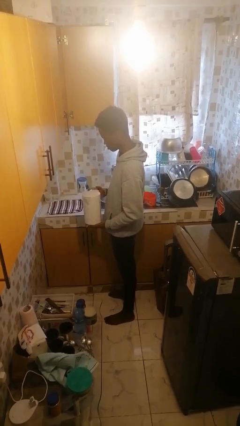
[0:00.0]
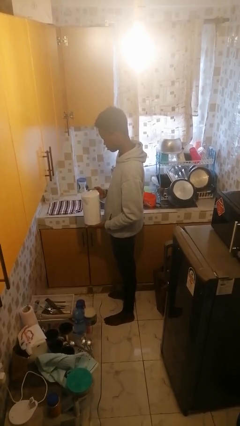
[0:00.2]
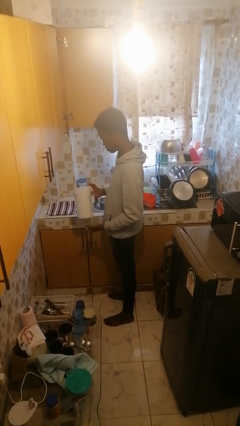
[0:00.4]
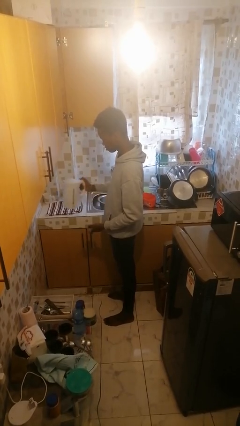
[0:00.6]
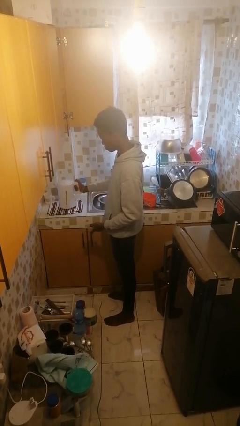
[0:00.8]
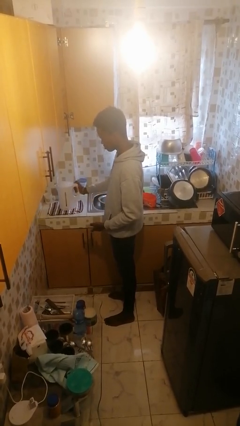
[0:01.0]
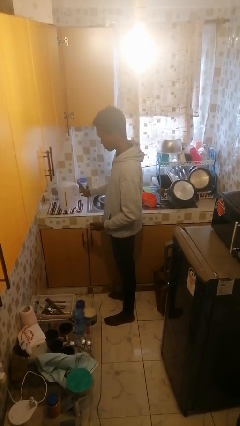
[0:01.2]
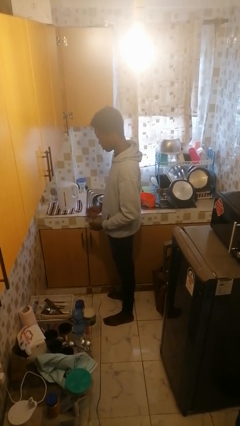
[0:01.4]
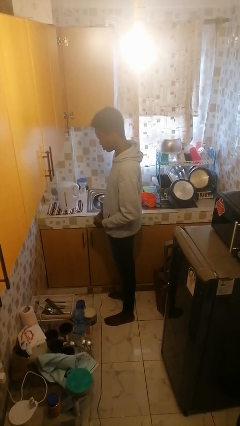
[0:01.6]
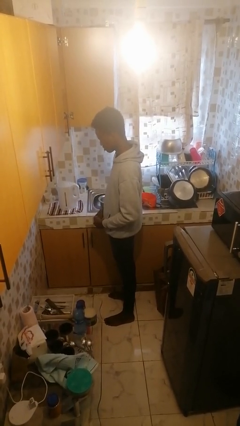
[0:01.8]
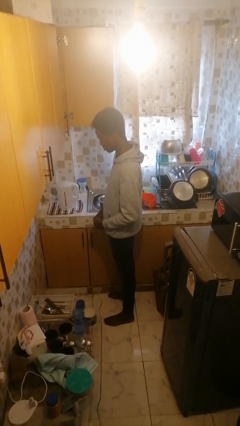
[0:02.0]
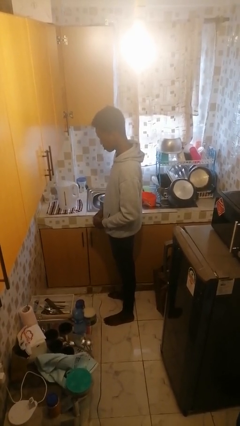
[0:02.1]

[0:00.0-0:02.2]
person puts down object on countertop

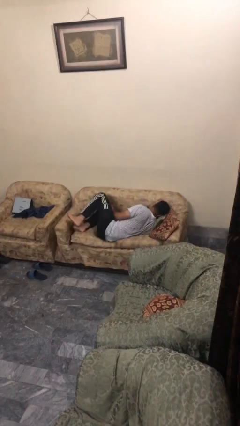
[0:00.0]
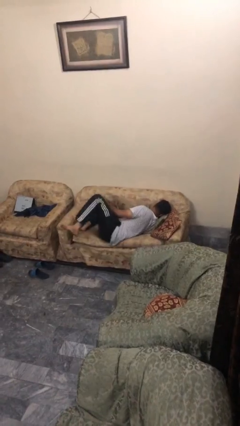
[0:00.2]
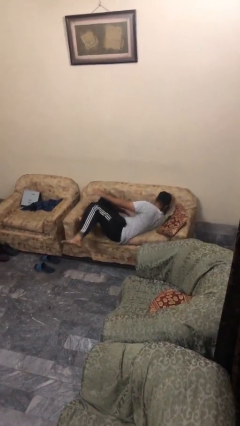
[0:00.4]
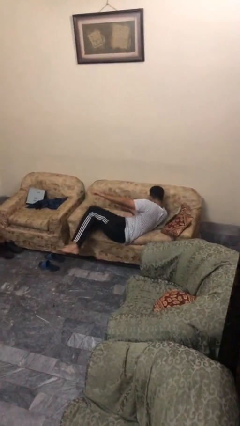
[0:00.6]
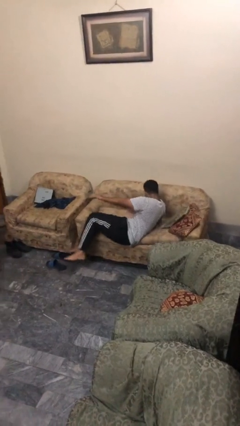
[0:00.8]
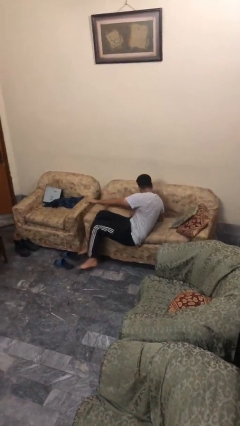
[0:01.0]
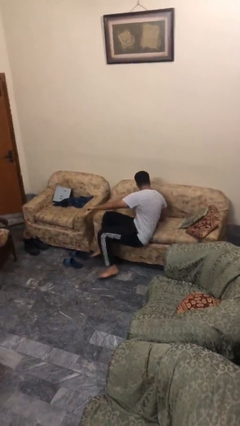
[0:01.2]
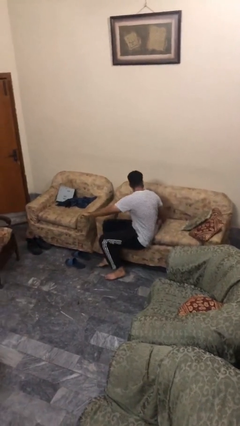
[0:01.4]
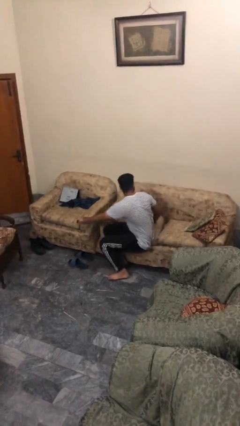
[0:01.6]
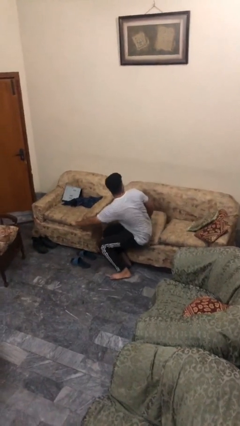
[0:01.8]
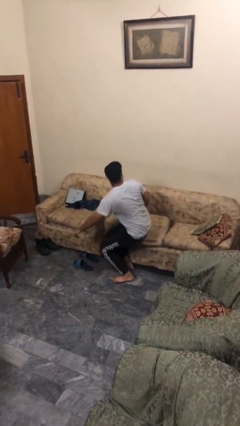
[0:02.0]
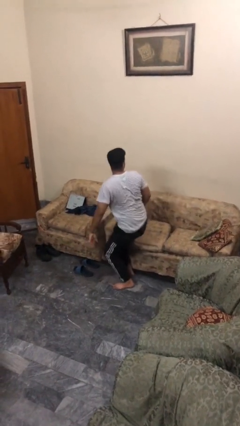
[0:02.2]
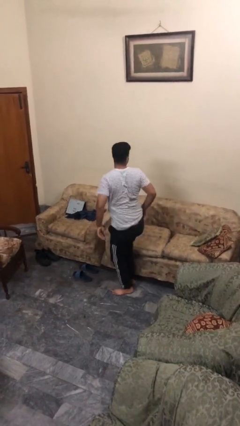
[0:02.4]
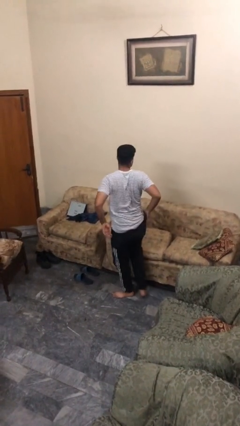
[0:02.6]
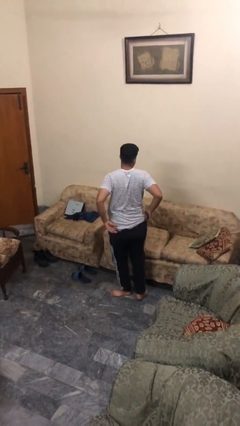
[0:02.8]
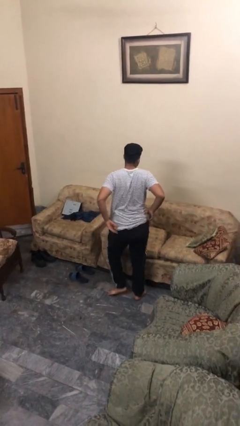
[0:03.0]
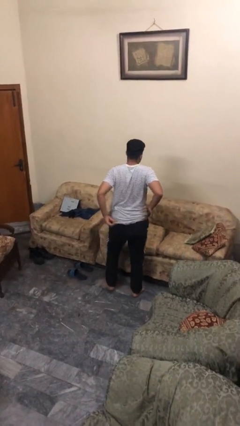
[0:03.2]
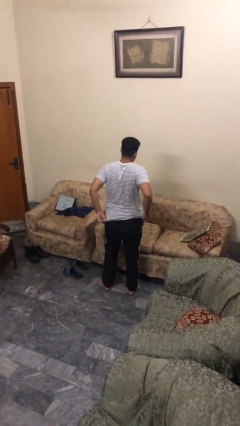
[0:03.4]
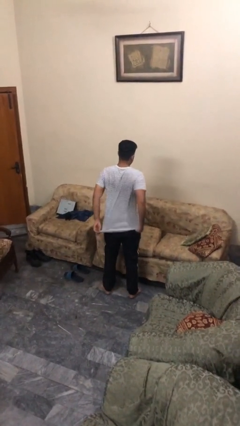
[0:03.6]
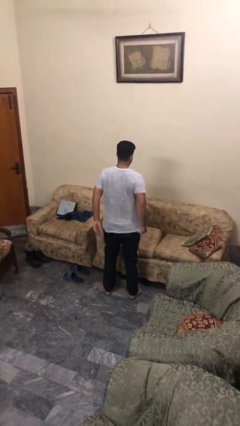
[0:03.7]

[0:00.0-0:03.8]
person stands up

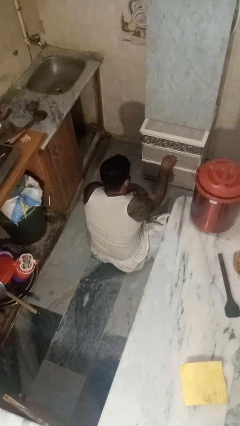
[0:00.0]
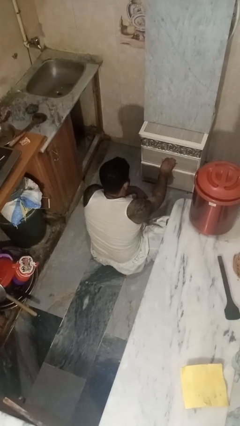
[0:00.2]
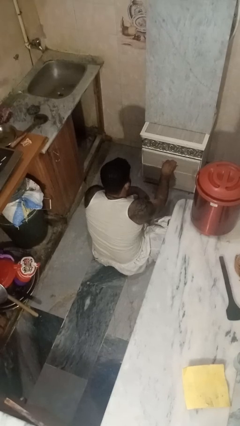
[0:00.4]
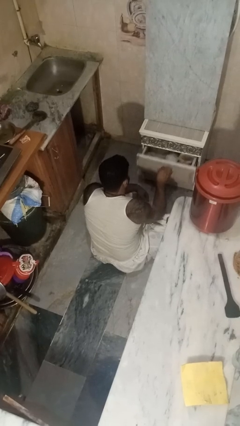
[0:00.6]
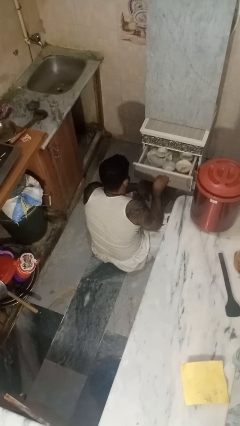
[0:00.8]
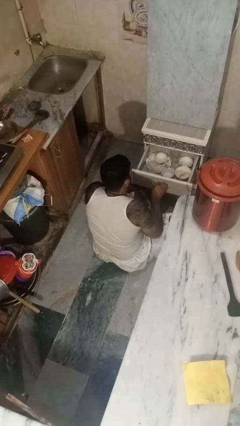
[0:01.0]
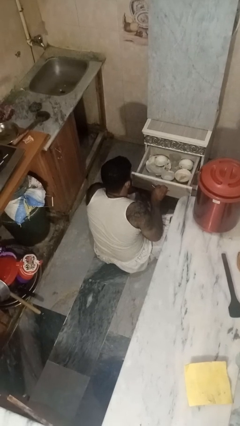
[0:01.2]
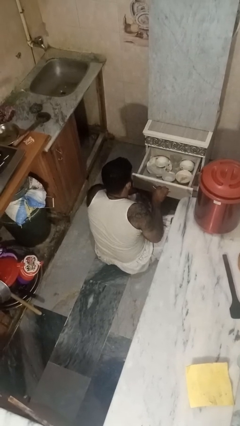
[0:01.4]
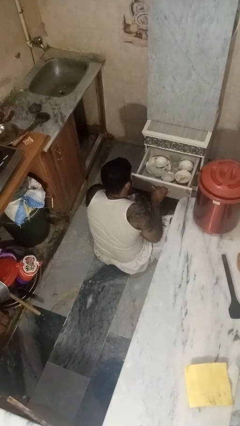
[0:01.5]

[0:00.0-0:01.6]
person opens kitchen drawer

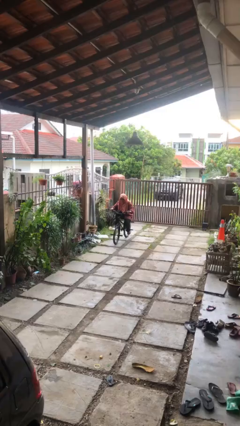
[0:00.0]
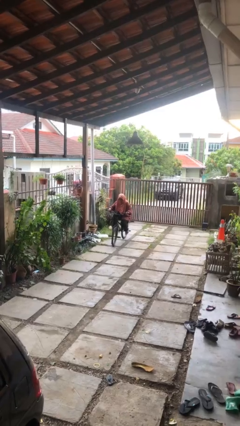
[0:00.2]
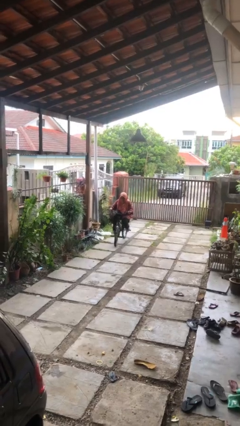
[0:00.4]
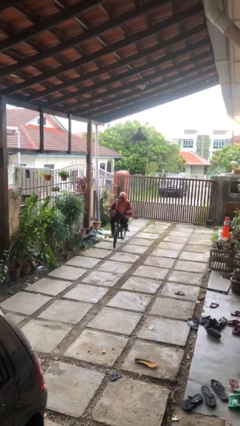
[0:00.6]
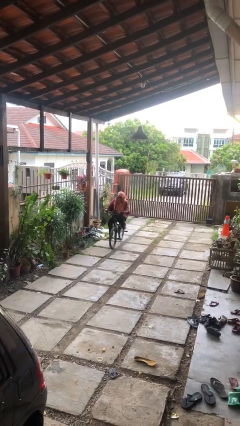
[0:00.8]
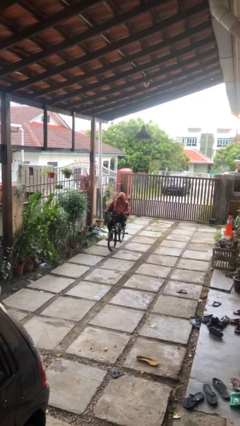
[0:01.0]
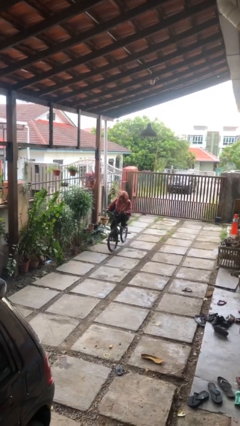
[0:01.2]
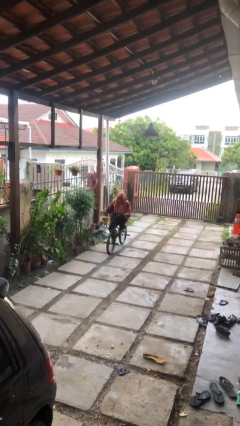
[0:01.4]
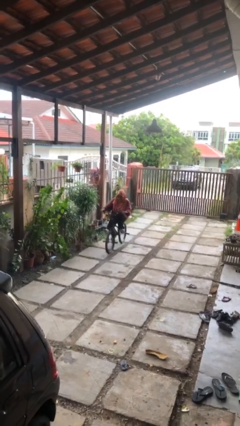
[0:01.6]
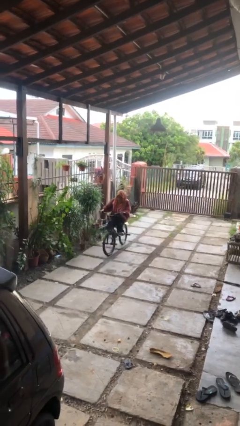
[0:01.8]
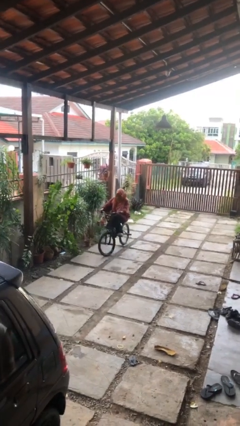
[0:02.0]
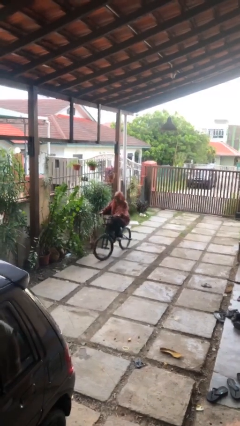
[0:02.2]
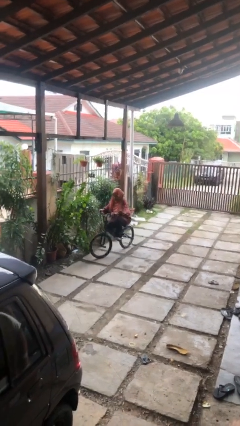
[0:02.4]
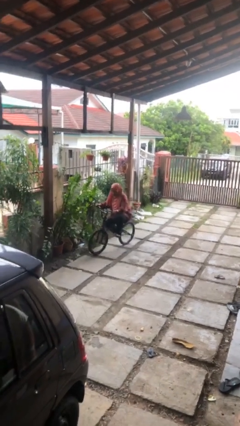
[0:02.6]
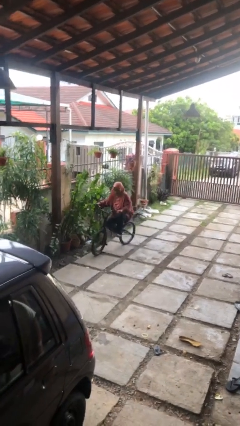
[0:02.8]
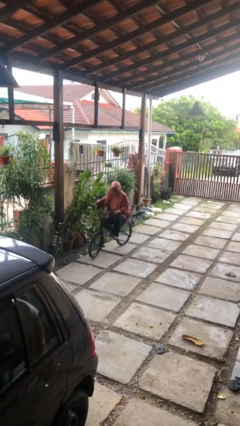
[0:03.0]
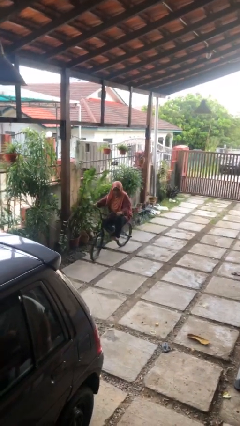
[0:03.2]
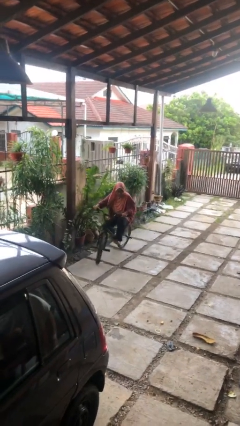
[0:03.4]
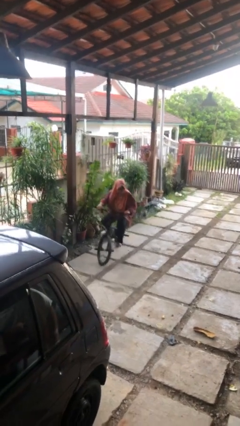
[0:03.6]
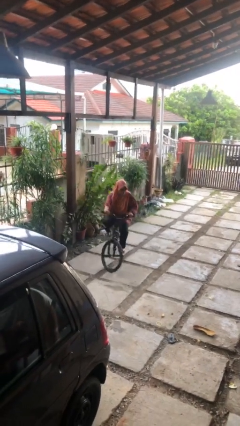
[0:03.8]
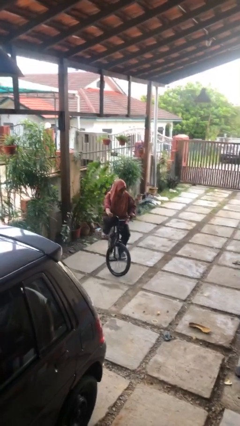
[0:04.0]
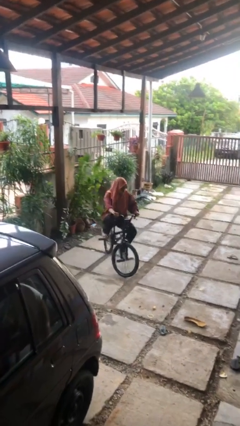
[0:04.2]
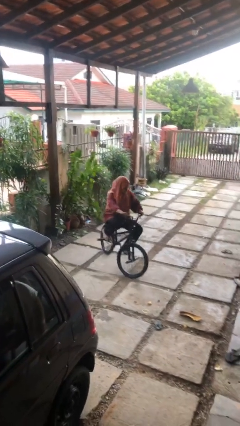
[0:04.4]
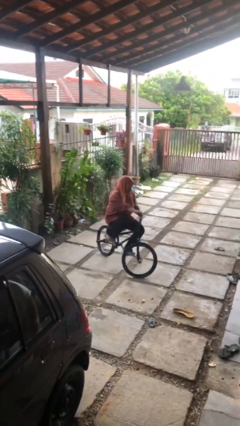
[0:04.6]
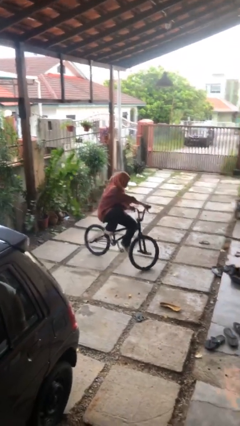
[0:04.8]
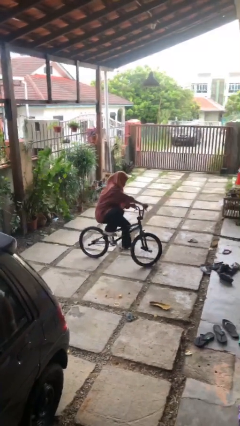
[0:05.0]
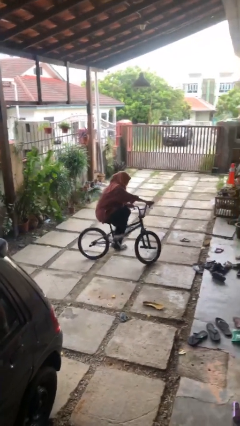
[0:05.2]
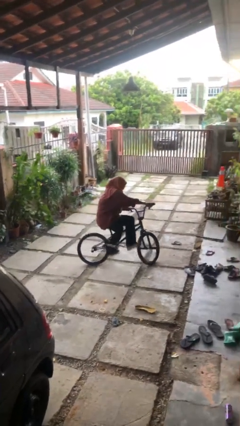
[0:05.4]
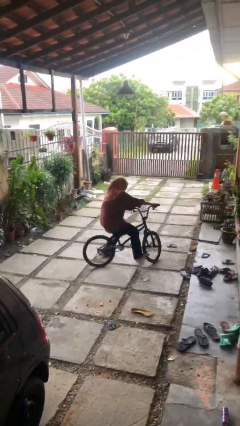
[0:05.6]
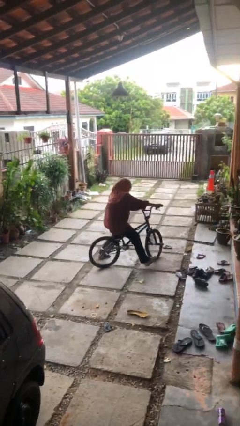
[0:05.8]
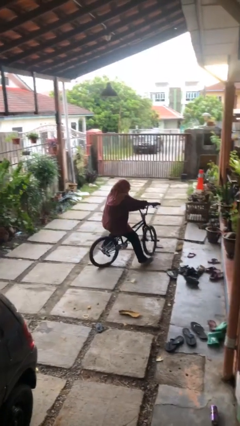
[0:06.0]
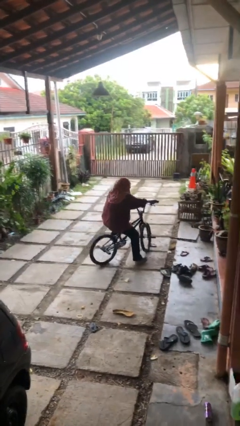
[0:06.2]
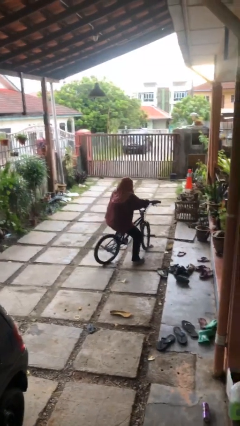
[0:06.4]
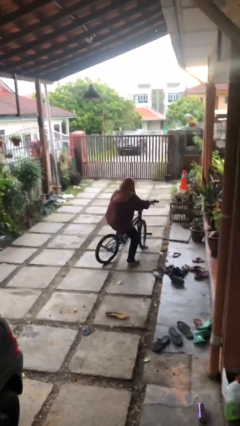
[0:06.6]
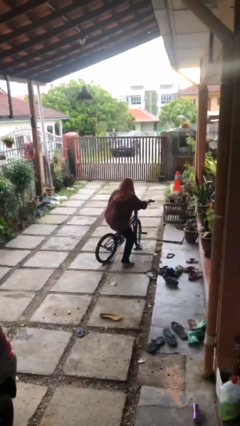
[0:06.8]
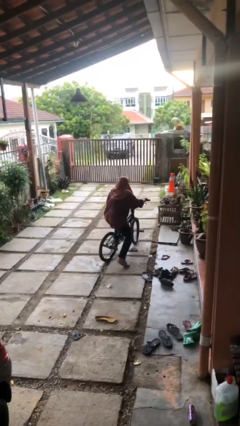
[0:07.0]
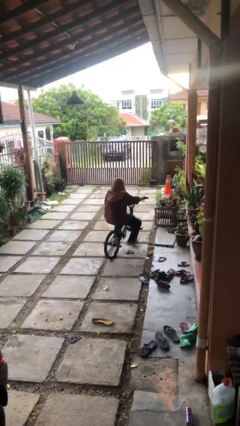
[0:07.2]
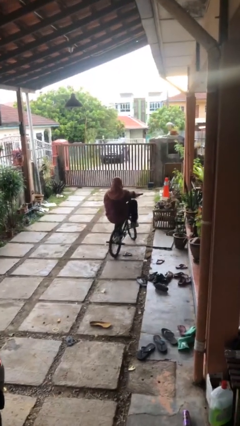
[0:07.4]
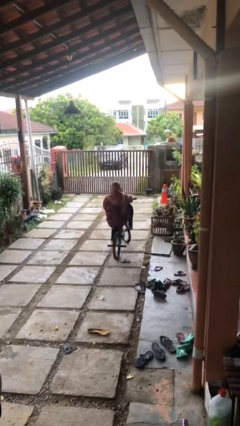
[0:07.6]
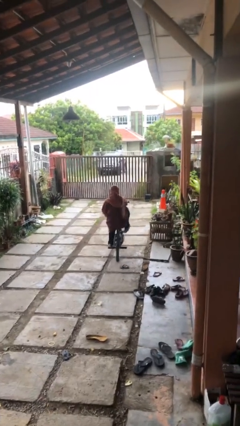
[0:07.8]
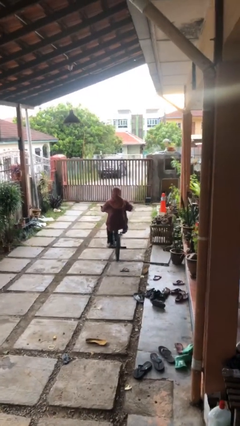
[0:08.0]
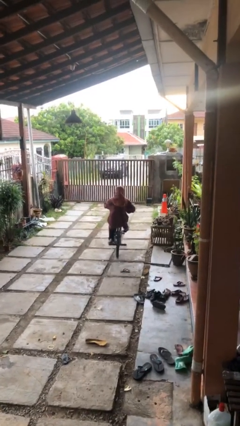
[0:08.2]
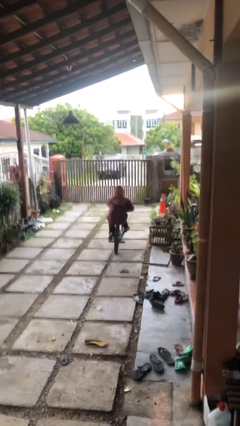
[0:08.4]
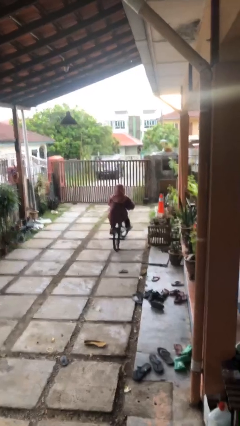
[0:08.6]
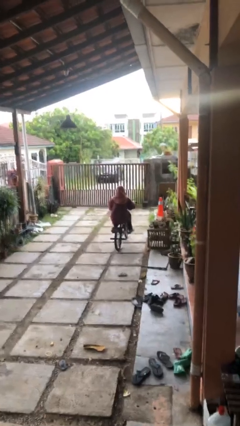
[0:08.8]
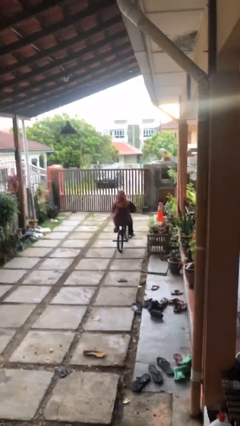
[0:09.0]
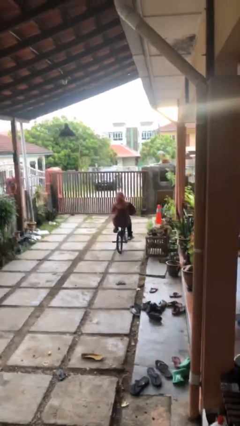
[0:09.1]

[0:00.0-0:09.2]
person rides bicycle

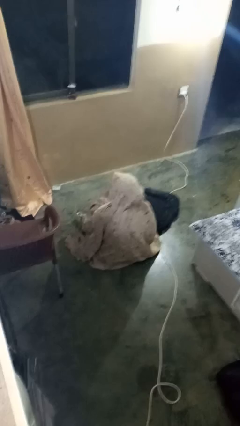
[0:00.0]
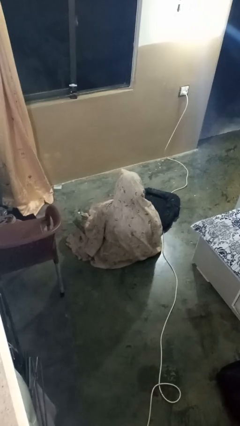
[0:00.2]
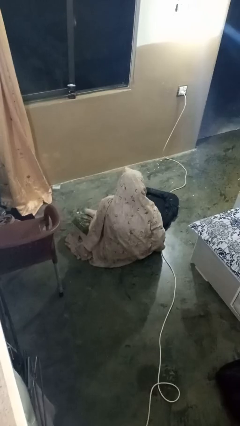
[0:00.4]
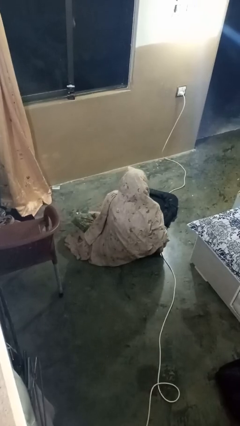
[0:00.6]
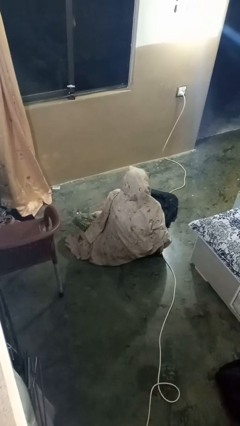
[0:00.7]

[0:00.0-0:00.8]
person eats snack from bag
